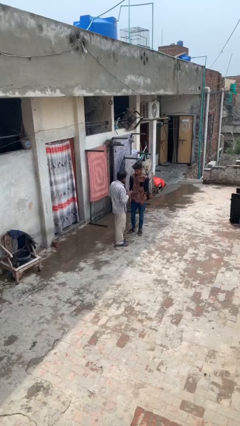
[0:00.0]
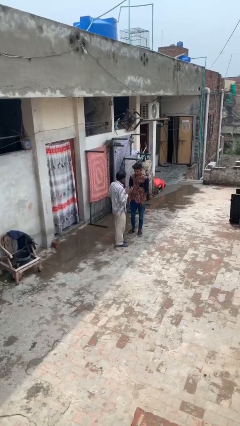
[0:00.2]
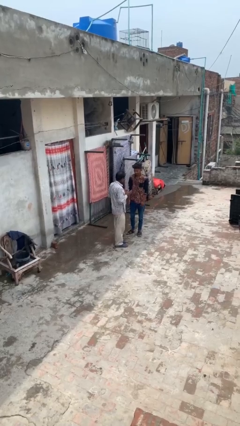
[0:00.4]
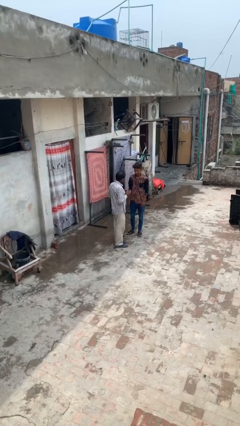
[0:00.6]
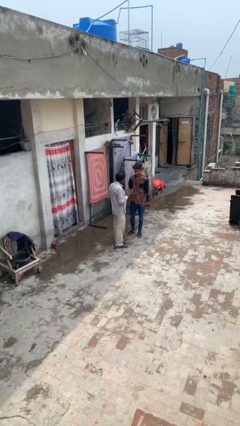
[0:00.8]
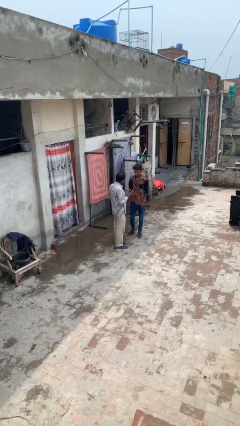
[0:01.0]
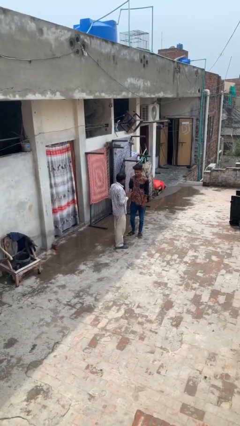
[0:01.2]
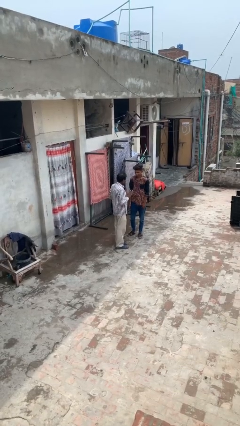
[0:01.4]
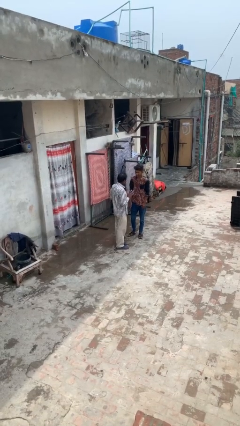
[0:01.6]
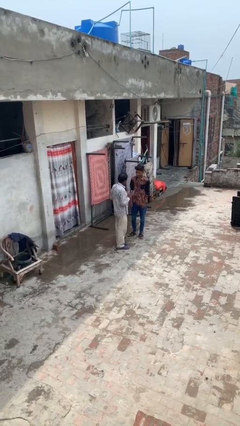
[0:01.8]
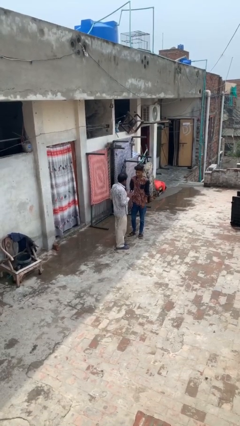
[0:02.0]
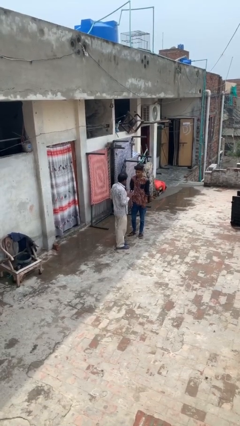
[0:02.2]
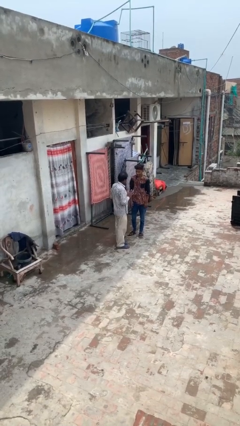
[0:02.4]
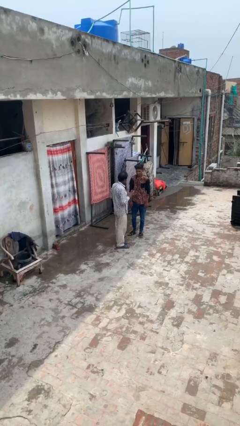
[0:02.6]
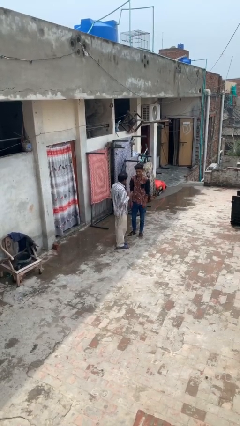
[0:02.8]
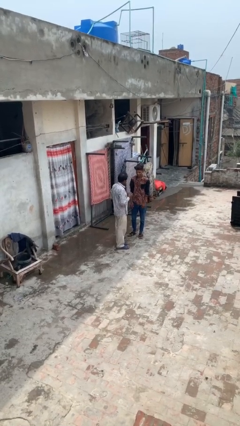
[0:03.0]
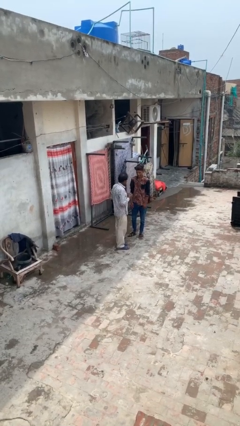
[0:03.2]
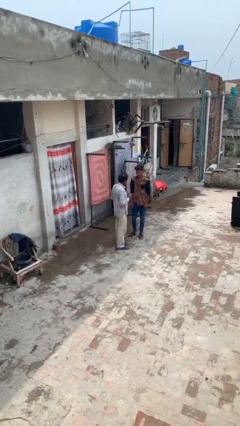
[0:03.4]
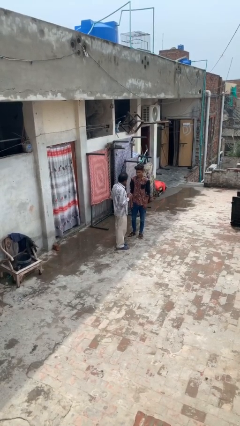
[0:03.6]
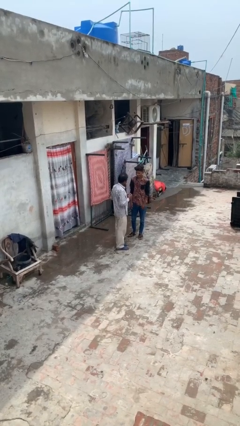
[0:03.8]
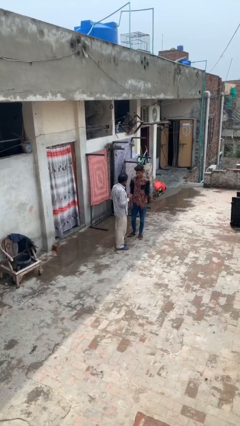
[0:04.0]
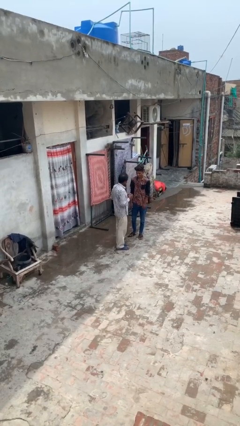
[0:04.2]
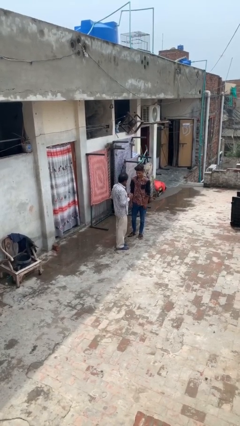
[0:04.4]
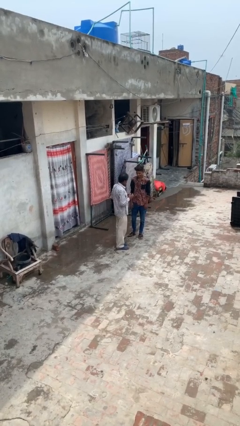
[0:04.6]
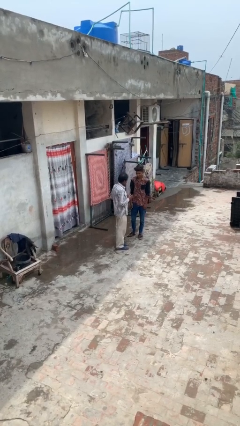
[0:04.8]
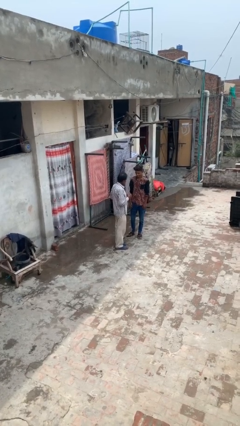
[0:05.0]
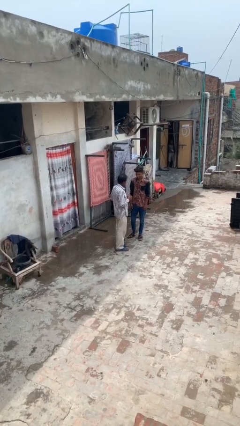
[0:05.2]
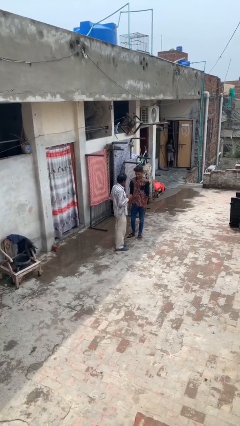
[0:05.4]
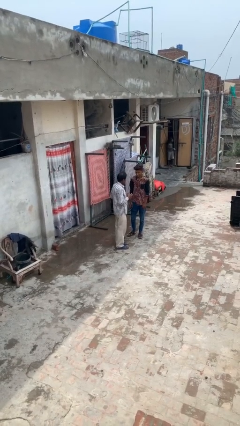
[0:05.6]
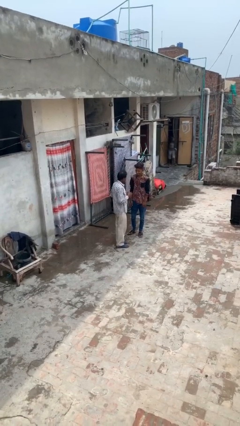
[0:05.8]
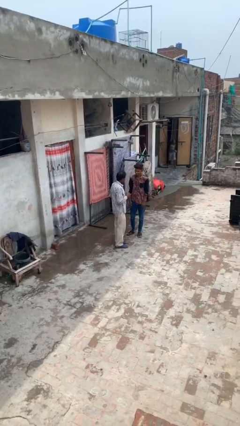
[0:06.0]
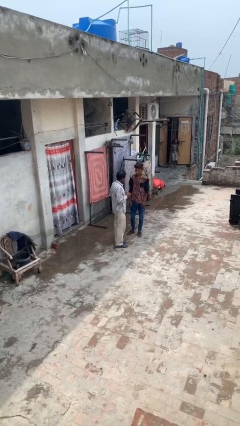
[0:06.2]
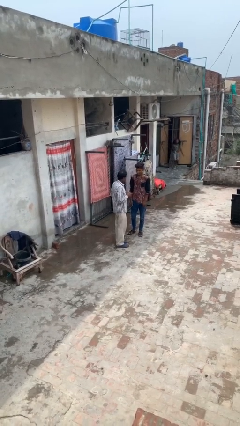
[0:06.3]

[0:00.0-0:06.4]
person talks to person

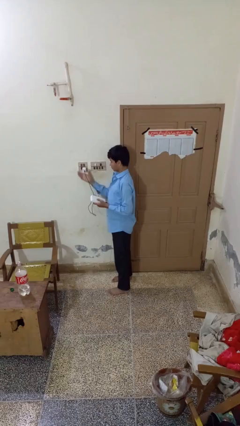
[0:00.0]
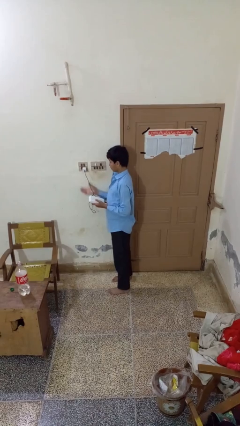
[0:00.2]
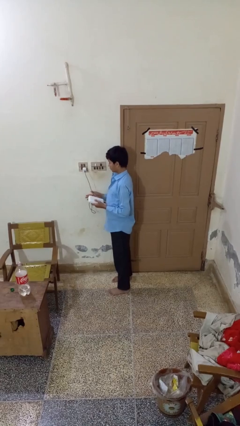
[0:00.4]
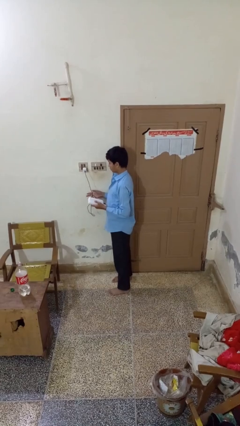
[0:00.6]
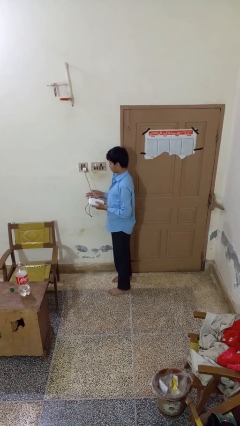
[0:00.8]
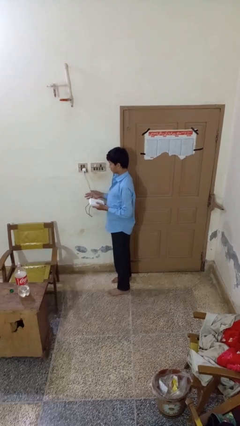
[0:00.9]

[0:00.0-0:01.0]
person plugs into electrical socket

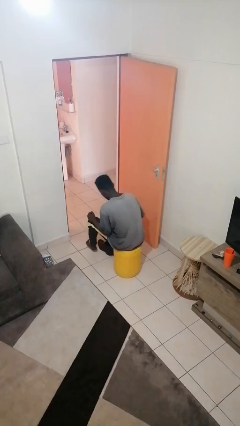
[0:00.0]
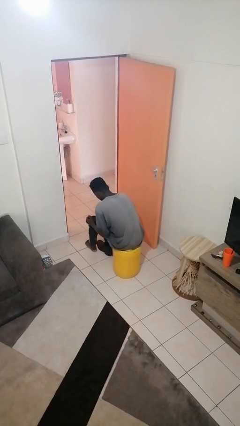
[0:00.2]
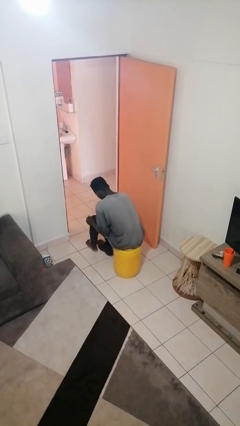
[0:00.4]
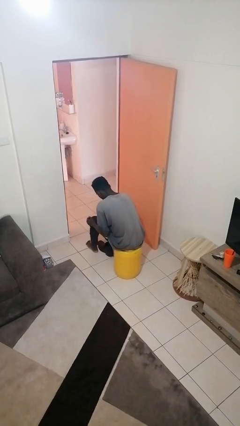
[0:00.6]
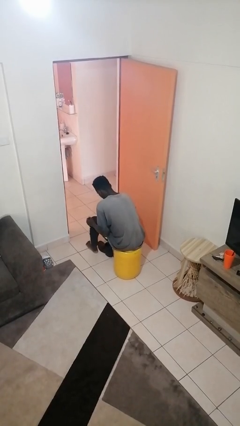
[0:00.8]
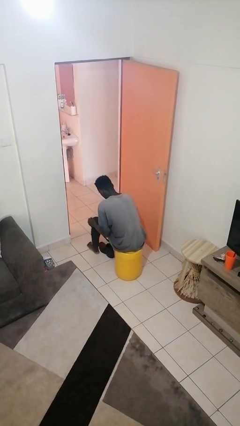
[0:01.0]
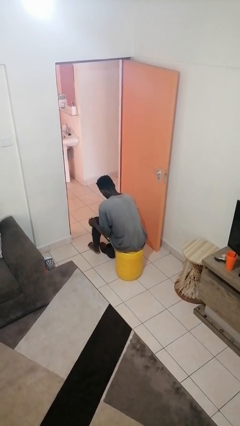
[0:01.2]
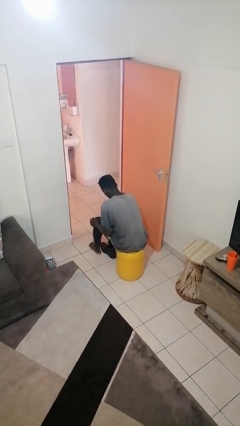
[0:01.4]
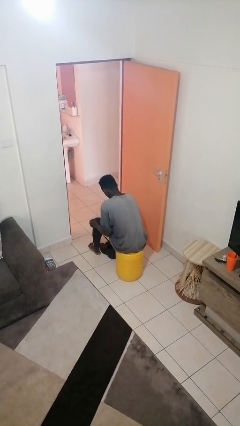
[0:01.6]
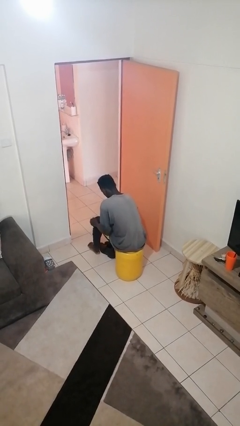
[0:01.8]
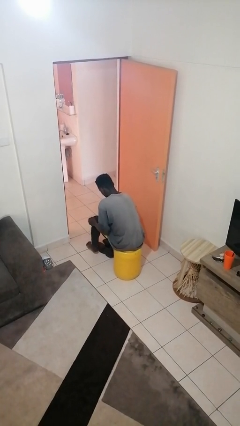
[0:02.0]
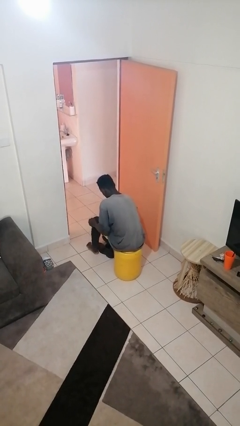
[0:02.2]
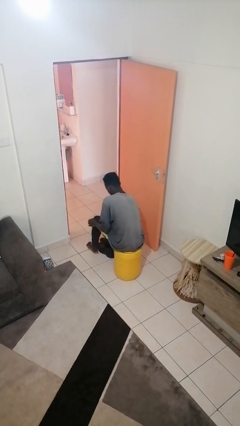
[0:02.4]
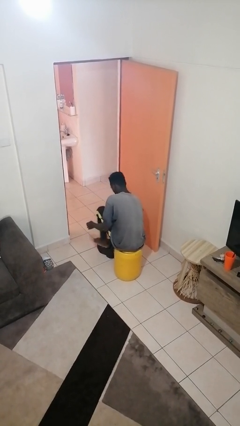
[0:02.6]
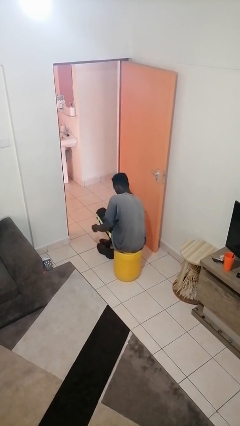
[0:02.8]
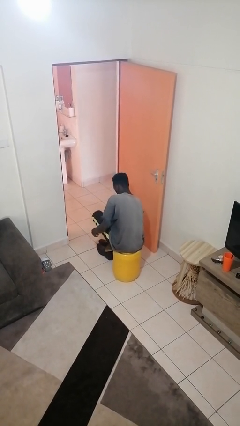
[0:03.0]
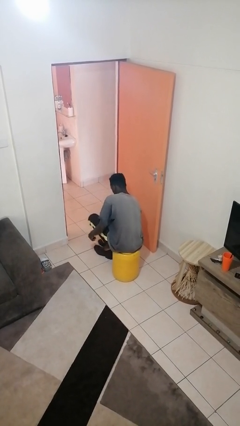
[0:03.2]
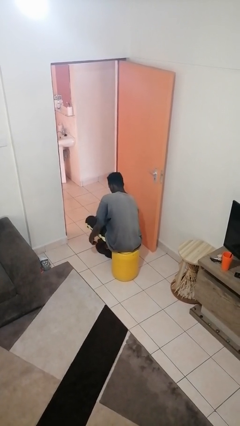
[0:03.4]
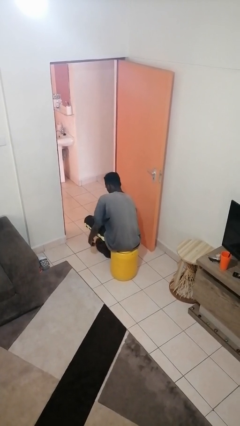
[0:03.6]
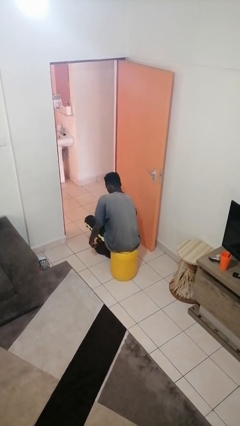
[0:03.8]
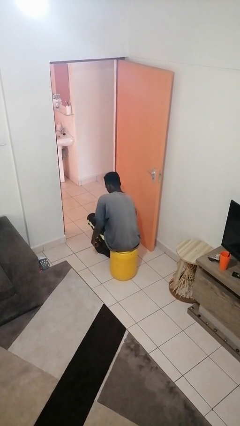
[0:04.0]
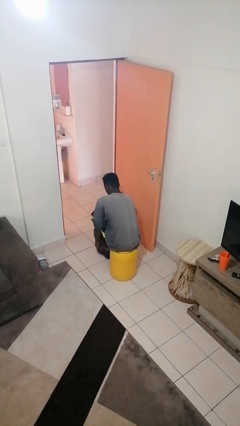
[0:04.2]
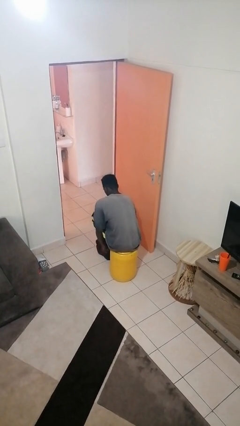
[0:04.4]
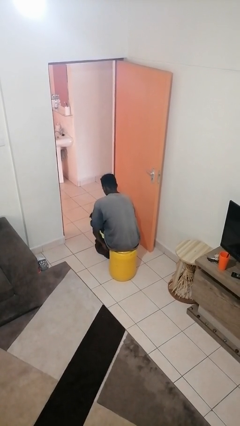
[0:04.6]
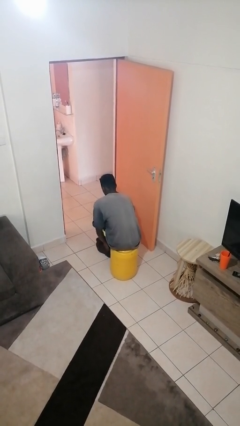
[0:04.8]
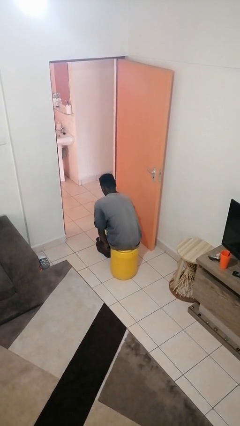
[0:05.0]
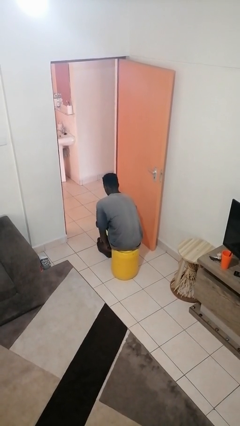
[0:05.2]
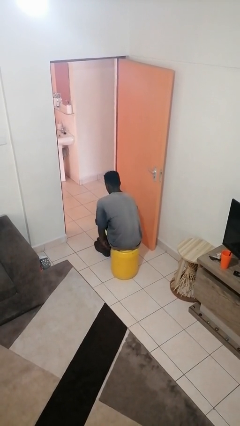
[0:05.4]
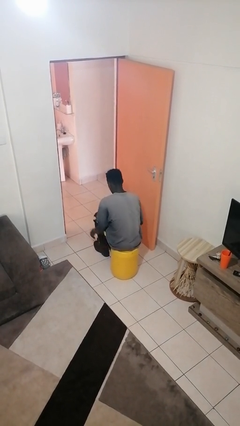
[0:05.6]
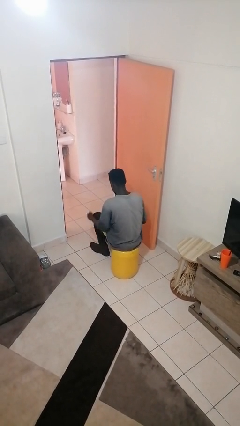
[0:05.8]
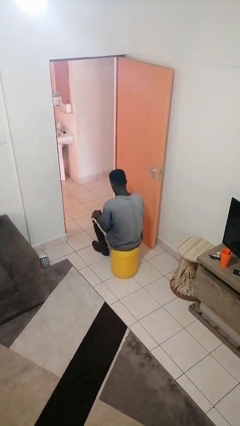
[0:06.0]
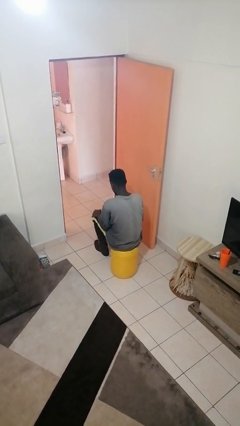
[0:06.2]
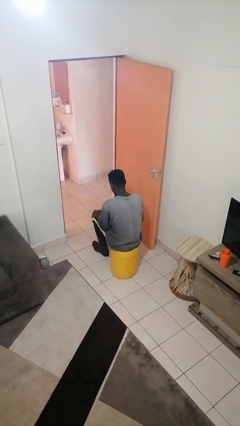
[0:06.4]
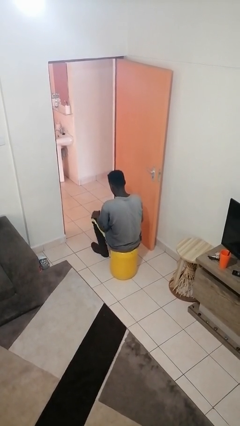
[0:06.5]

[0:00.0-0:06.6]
person puts on shoes

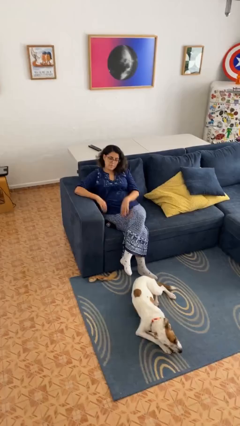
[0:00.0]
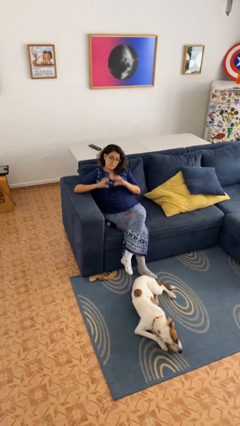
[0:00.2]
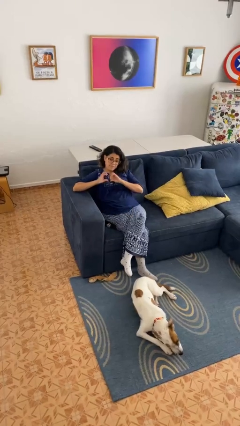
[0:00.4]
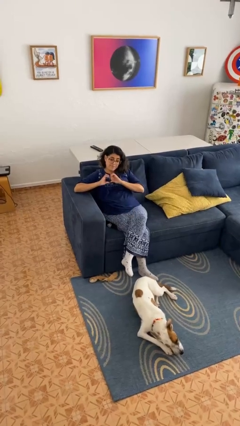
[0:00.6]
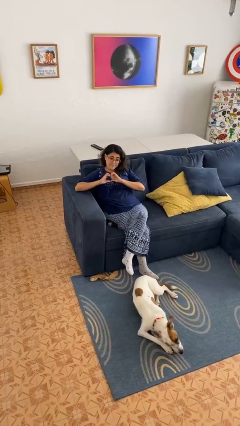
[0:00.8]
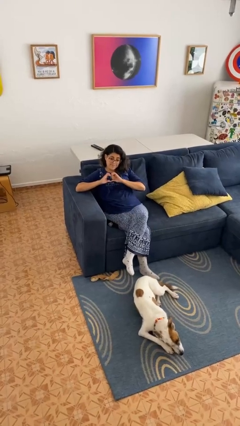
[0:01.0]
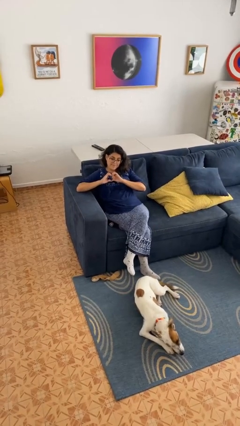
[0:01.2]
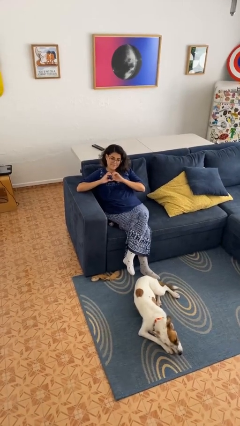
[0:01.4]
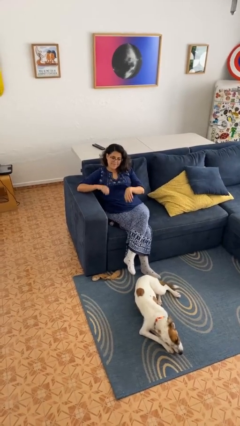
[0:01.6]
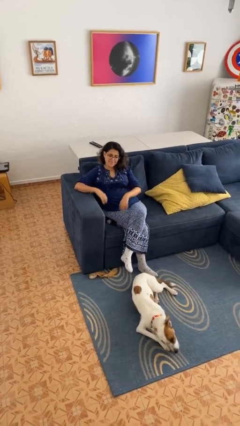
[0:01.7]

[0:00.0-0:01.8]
person gestures heart

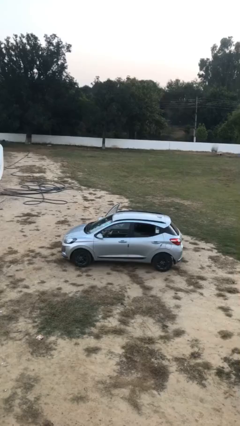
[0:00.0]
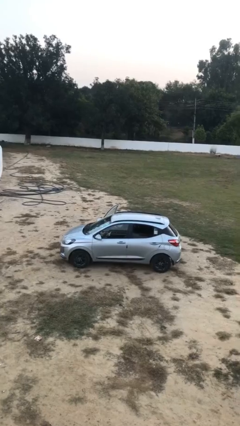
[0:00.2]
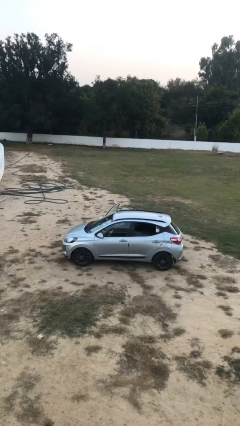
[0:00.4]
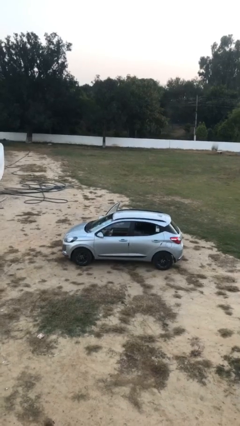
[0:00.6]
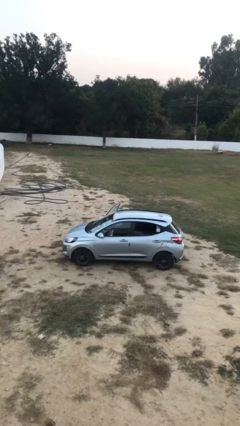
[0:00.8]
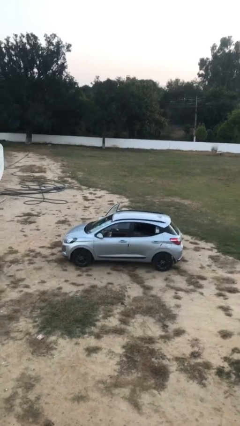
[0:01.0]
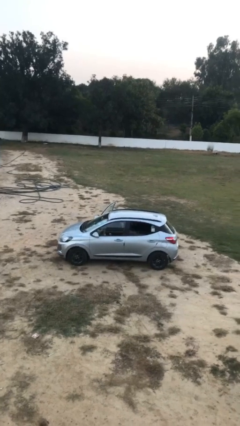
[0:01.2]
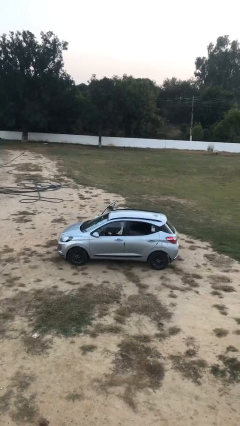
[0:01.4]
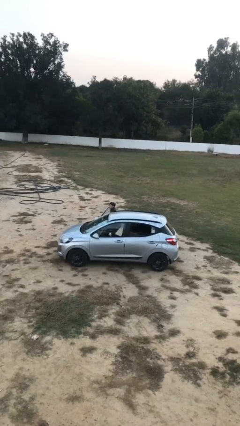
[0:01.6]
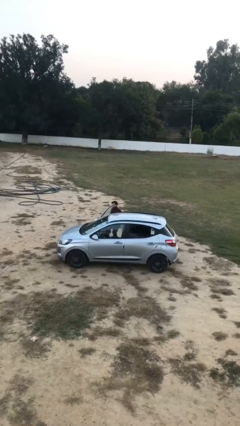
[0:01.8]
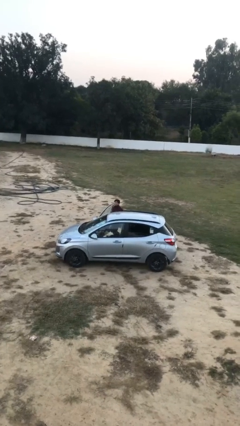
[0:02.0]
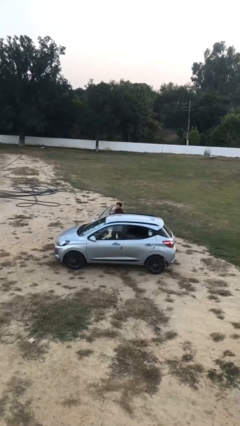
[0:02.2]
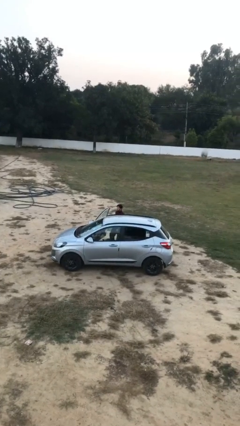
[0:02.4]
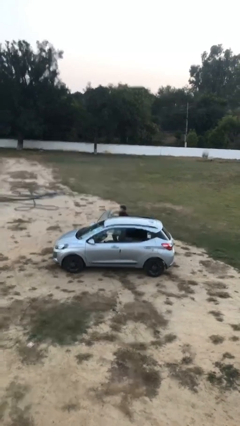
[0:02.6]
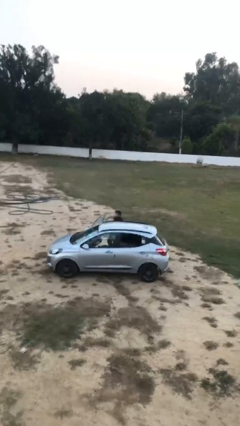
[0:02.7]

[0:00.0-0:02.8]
person exits car
